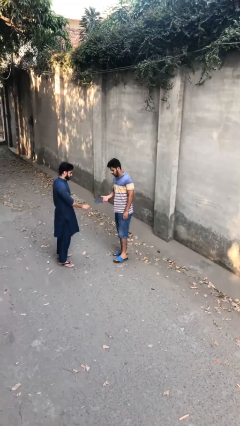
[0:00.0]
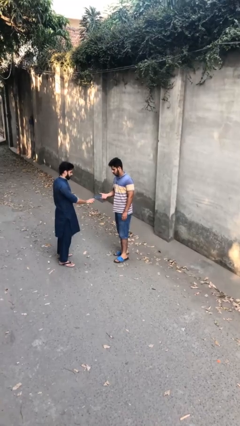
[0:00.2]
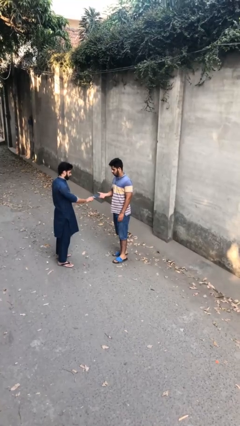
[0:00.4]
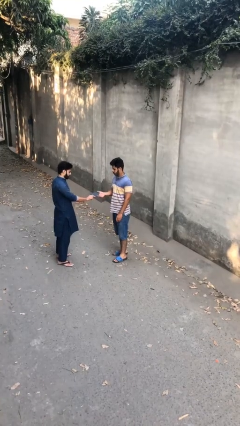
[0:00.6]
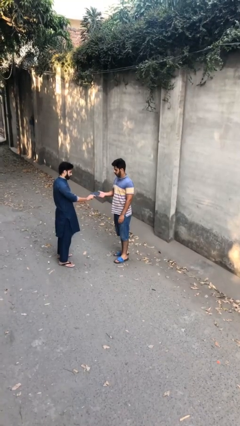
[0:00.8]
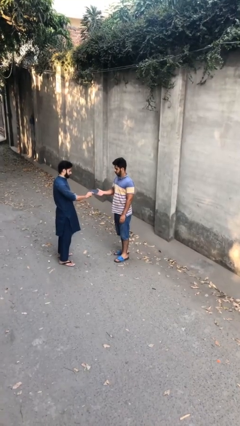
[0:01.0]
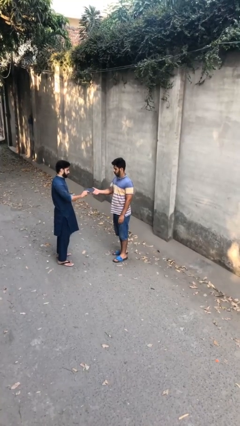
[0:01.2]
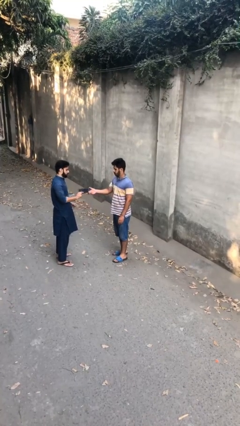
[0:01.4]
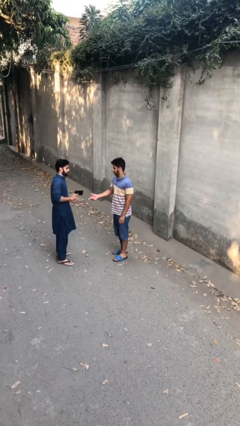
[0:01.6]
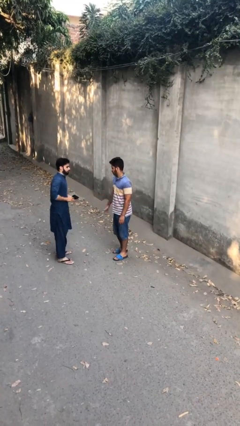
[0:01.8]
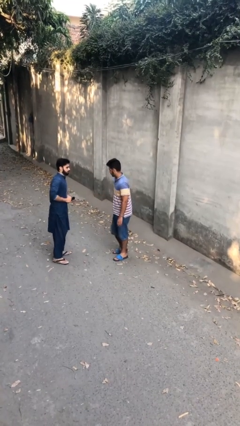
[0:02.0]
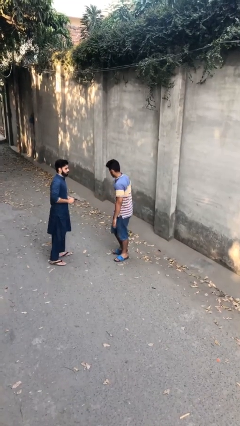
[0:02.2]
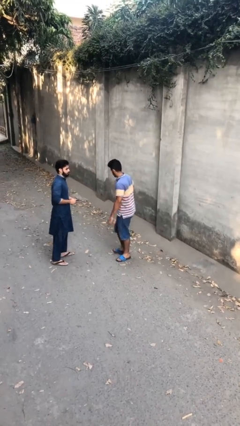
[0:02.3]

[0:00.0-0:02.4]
person transfers object to person

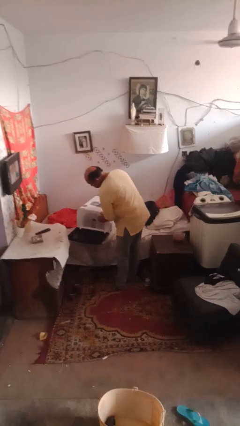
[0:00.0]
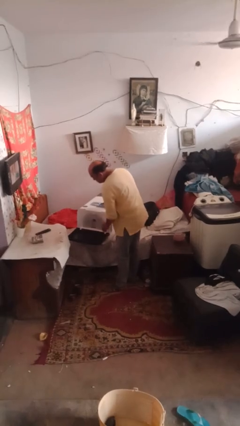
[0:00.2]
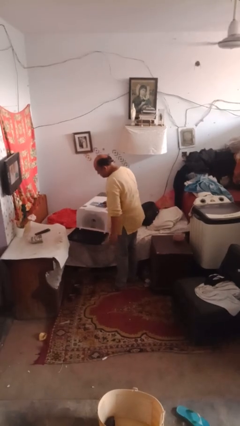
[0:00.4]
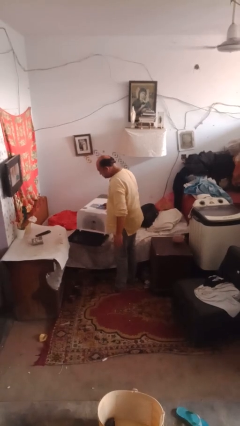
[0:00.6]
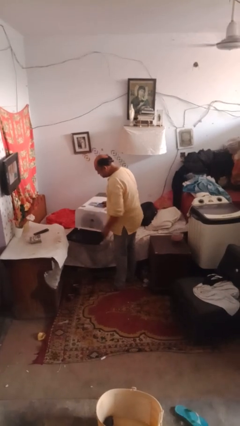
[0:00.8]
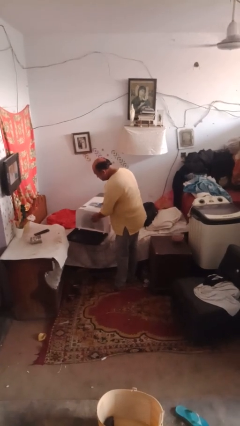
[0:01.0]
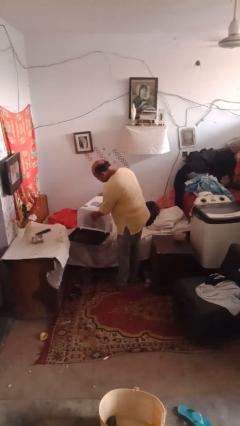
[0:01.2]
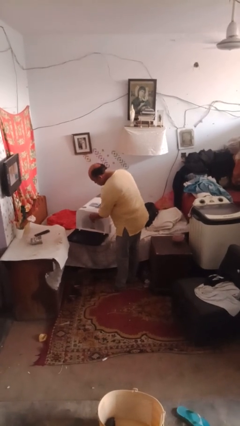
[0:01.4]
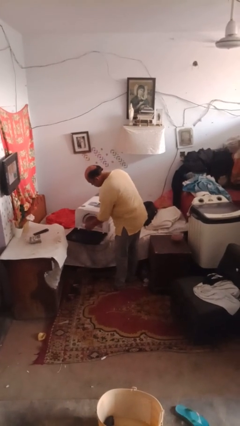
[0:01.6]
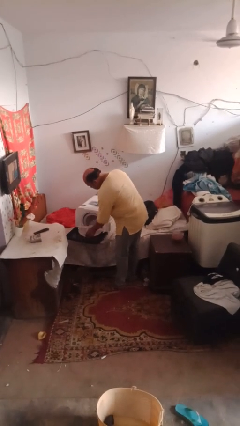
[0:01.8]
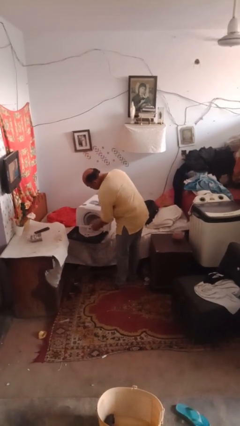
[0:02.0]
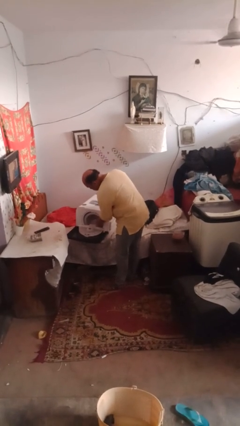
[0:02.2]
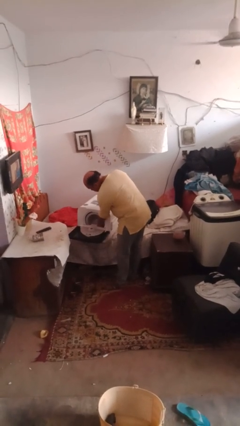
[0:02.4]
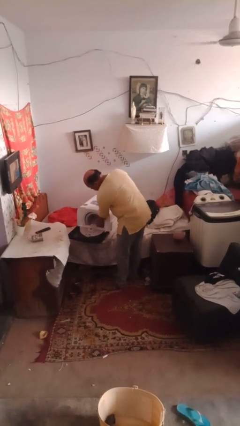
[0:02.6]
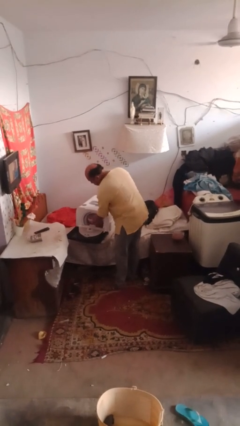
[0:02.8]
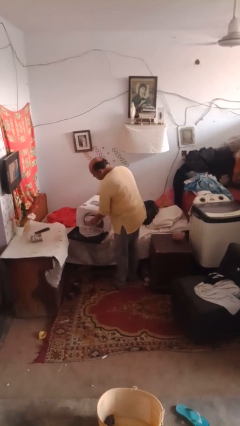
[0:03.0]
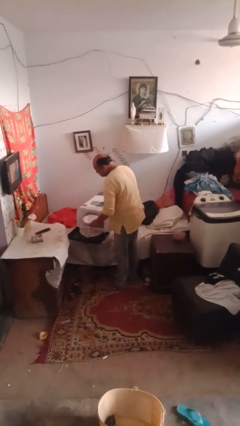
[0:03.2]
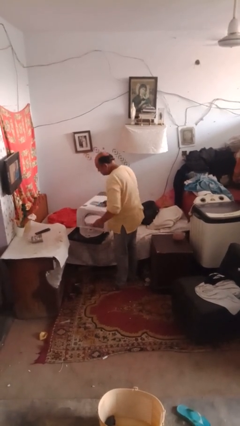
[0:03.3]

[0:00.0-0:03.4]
person unloads dishwasher

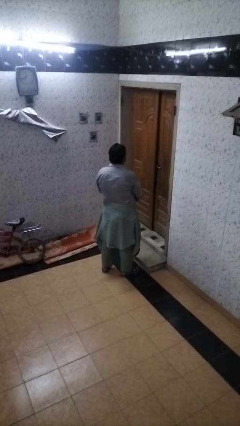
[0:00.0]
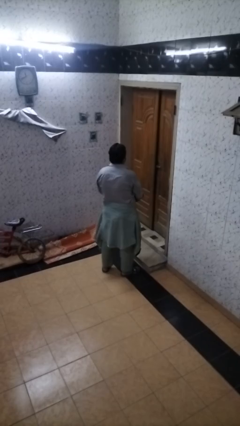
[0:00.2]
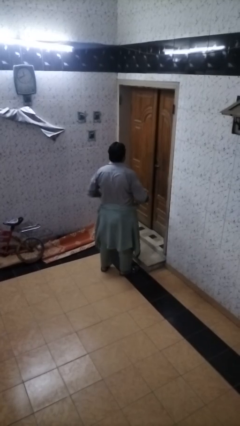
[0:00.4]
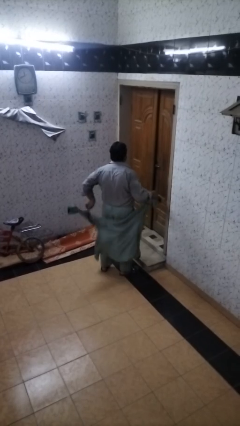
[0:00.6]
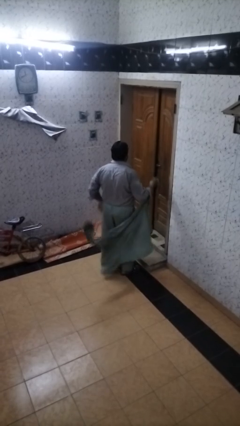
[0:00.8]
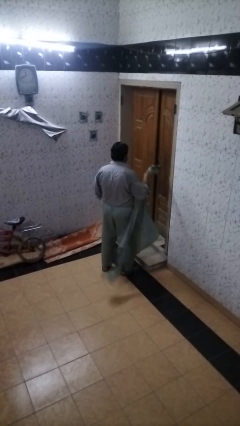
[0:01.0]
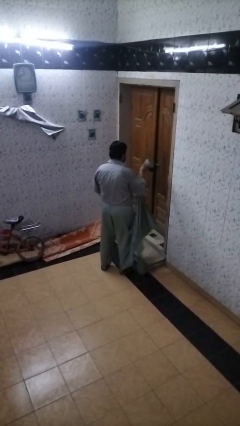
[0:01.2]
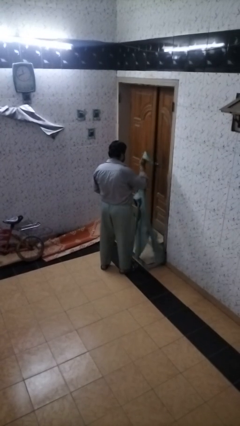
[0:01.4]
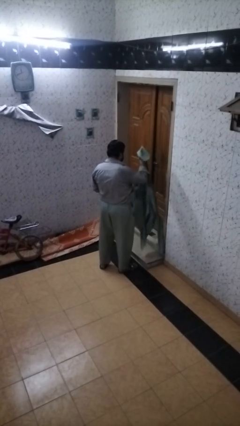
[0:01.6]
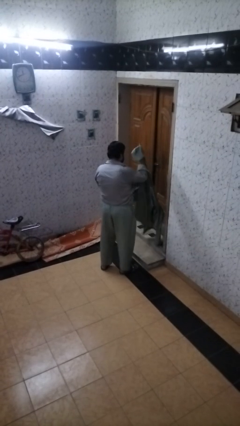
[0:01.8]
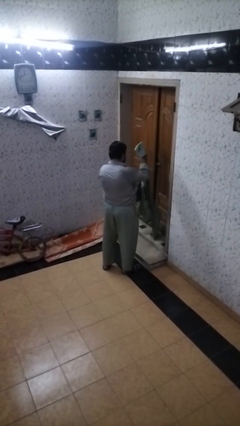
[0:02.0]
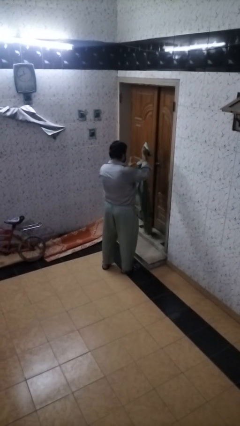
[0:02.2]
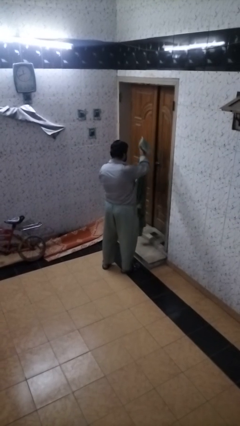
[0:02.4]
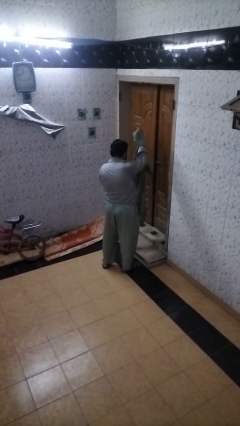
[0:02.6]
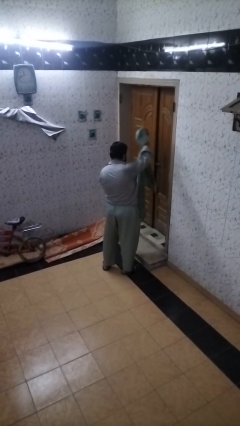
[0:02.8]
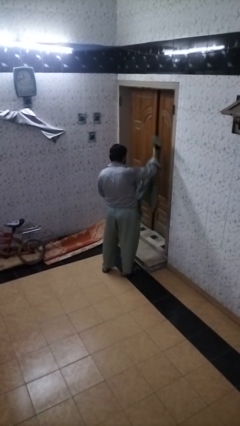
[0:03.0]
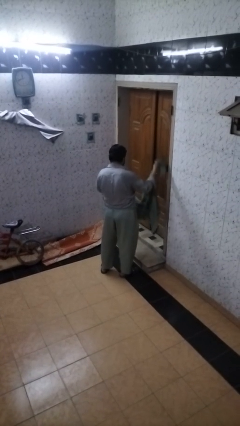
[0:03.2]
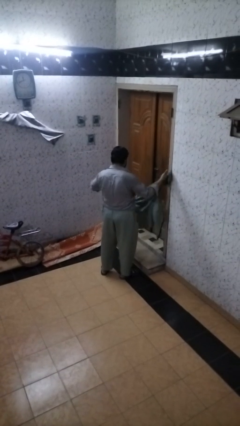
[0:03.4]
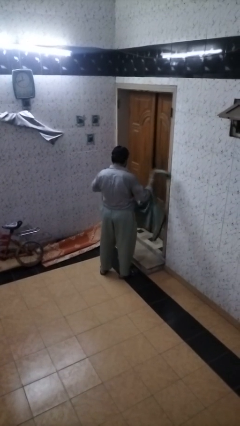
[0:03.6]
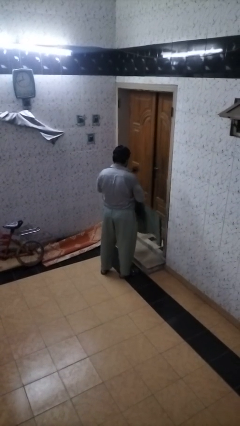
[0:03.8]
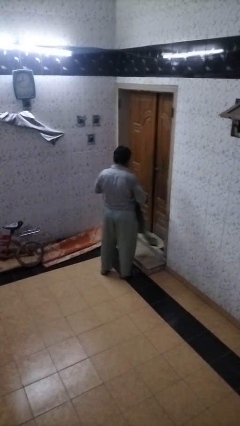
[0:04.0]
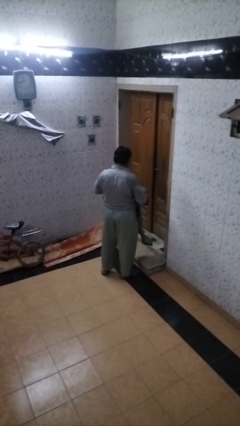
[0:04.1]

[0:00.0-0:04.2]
person unties jacket around waist

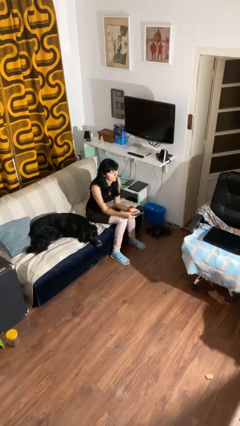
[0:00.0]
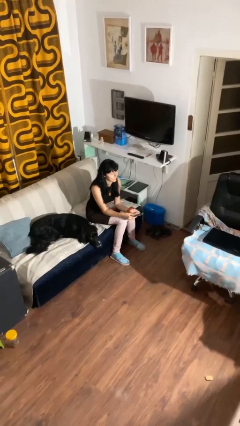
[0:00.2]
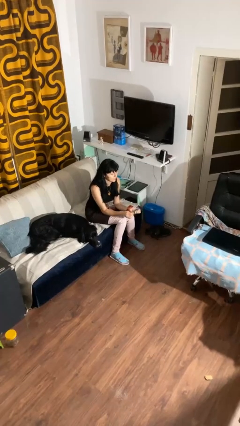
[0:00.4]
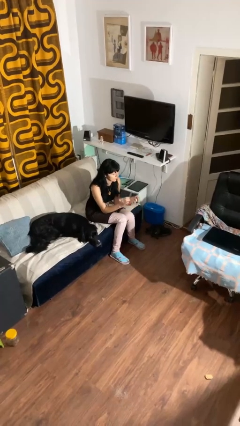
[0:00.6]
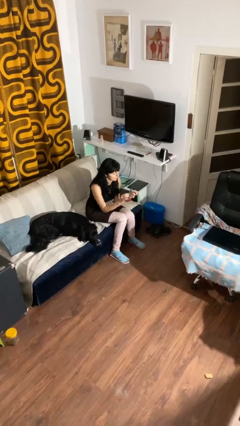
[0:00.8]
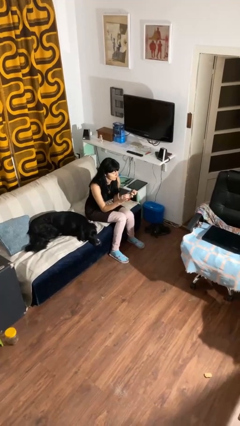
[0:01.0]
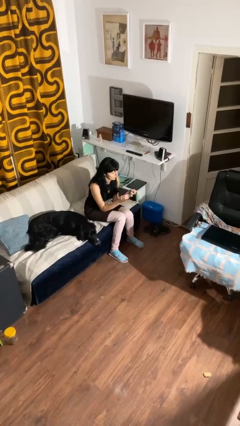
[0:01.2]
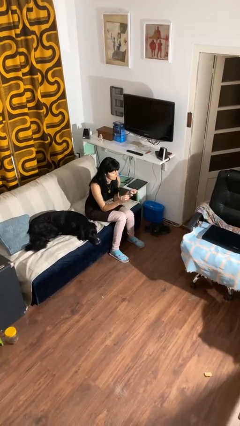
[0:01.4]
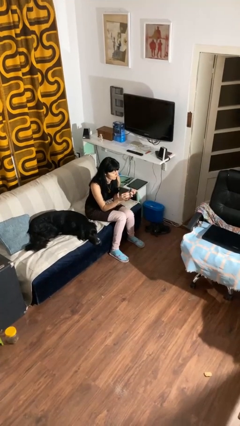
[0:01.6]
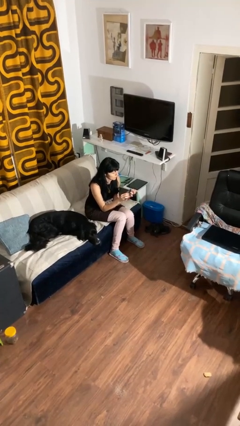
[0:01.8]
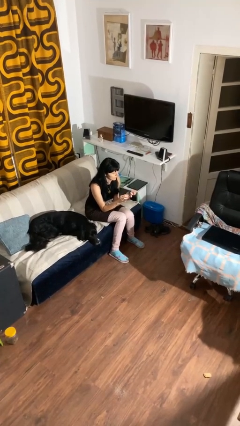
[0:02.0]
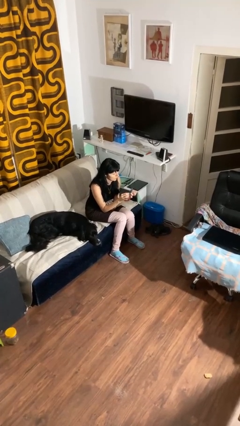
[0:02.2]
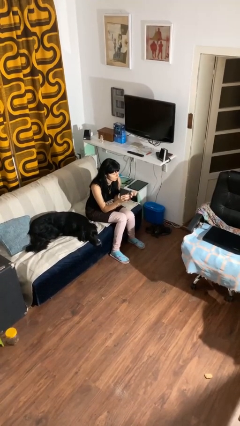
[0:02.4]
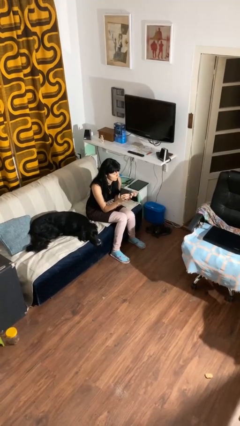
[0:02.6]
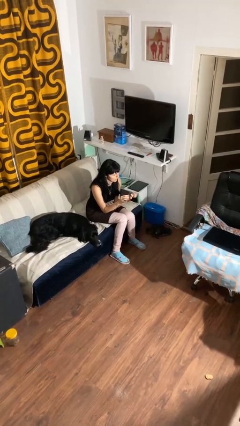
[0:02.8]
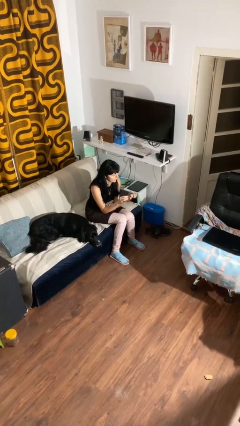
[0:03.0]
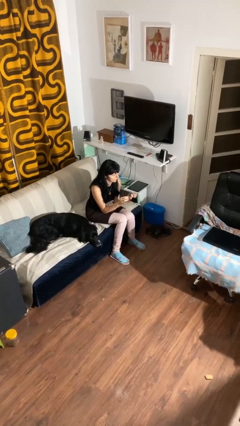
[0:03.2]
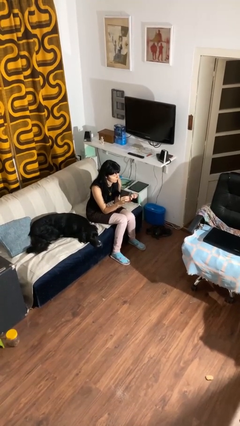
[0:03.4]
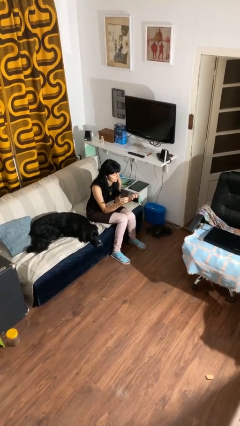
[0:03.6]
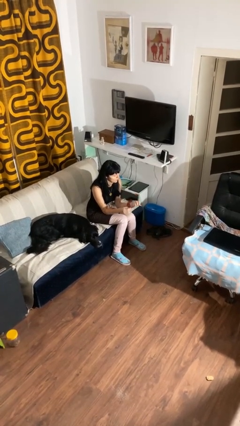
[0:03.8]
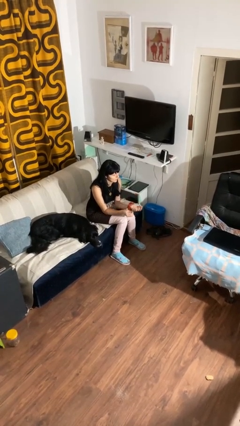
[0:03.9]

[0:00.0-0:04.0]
person files fingernails

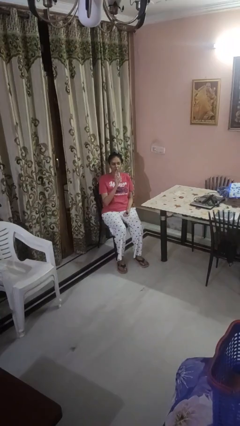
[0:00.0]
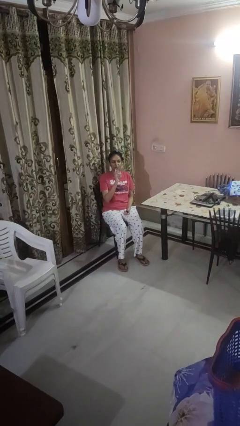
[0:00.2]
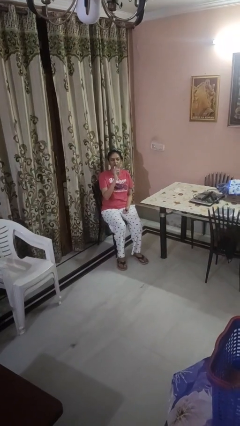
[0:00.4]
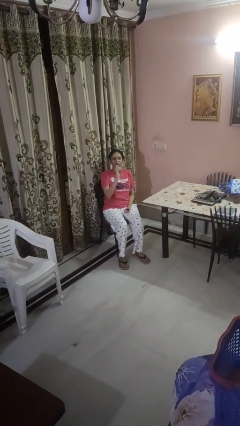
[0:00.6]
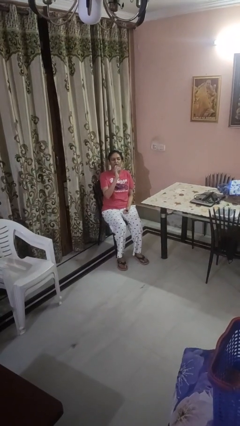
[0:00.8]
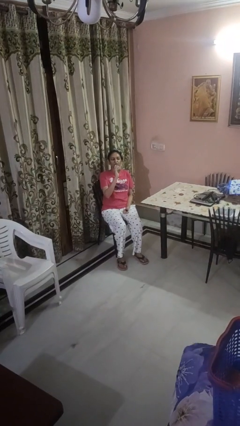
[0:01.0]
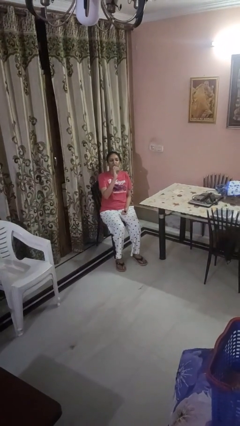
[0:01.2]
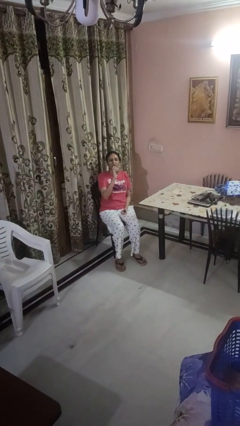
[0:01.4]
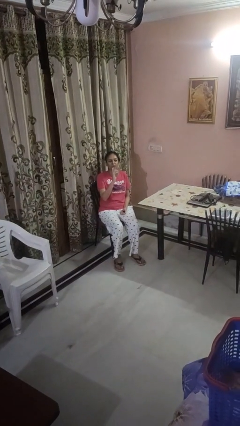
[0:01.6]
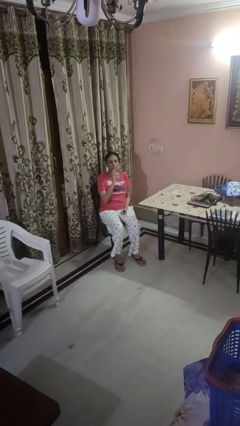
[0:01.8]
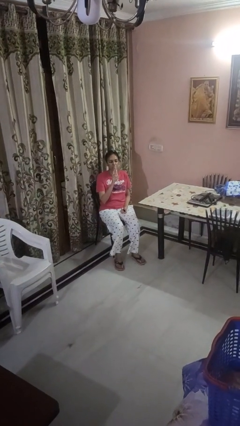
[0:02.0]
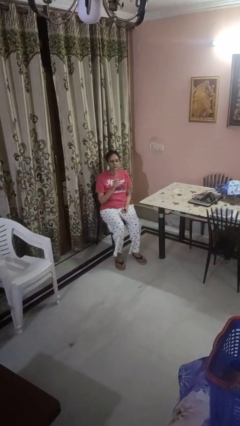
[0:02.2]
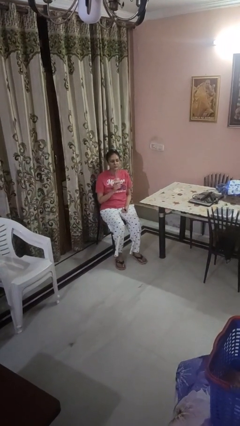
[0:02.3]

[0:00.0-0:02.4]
person drinks from bottle

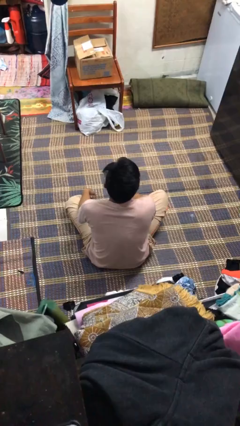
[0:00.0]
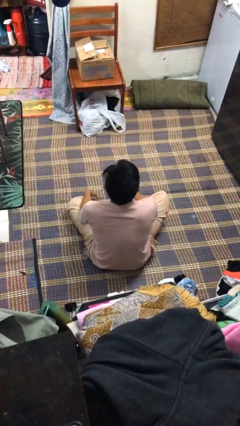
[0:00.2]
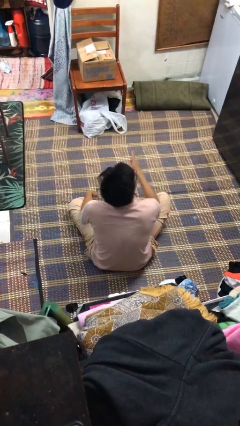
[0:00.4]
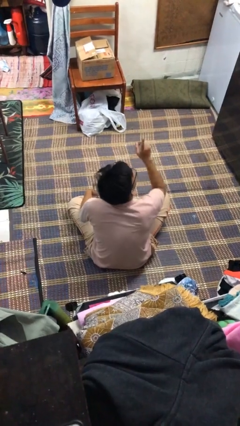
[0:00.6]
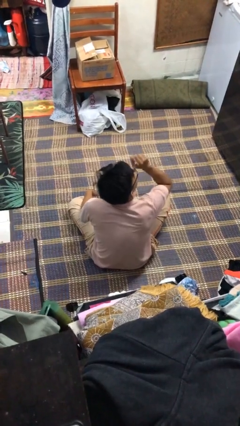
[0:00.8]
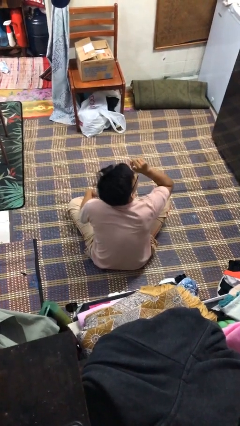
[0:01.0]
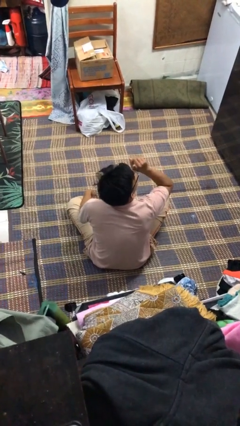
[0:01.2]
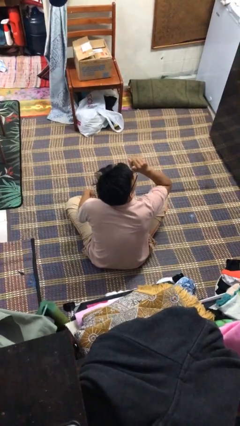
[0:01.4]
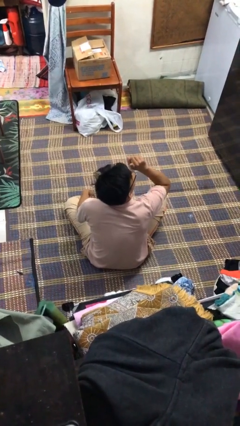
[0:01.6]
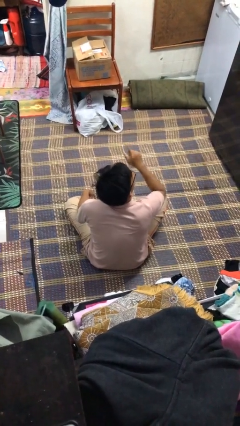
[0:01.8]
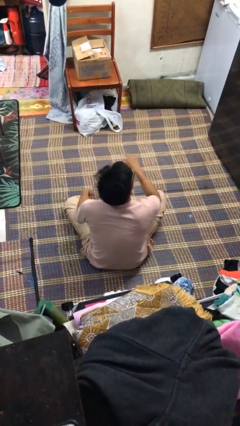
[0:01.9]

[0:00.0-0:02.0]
person gestures be quiet
